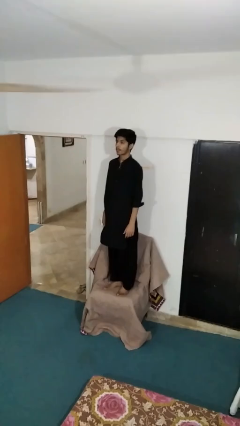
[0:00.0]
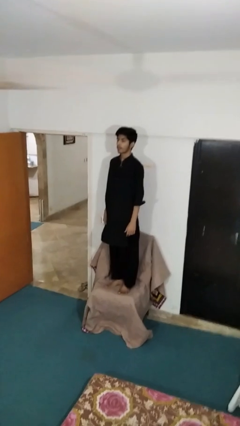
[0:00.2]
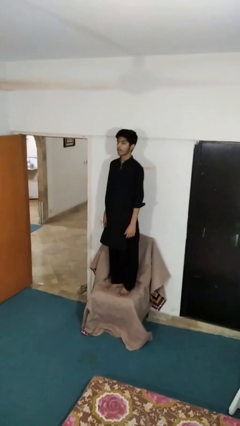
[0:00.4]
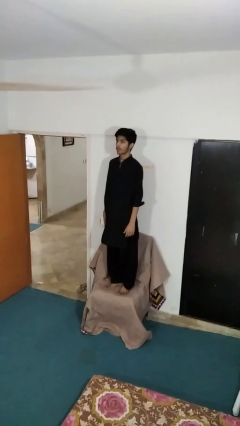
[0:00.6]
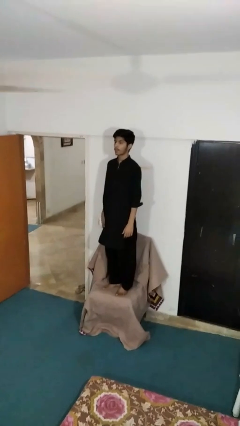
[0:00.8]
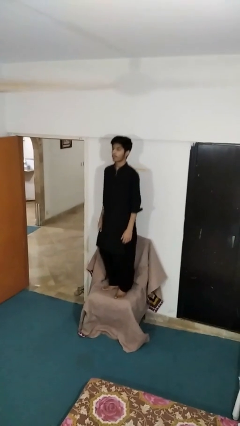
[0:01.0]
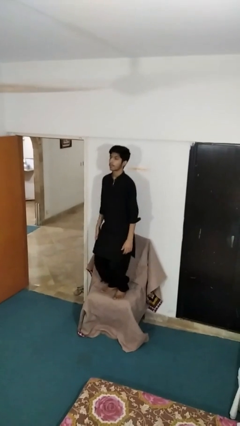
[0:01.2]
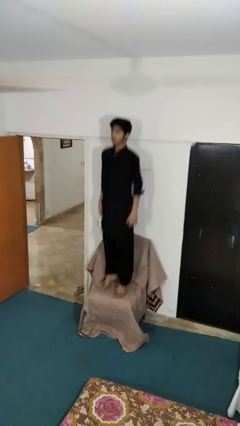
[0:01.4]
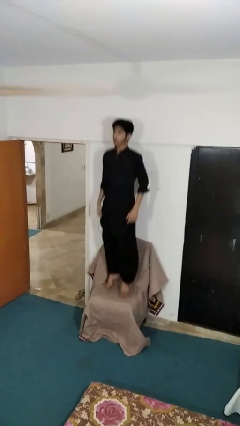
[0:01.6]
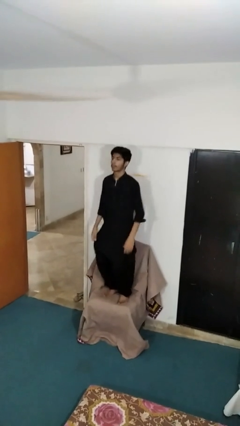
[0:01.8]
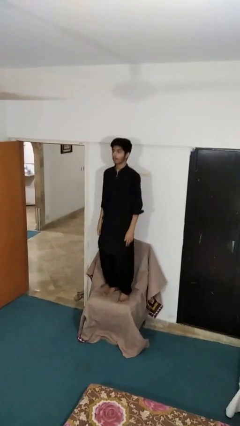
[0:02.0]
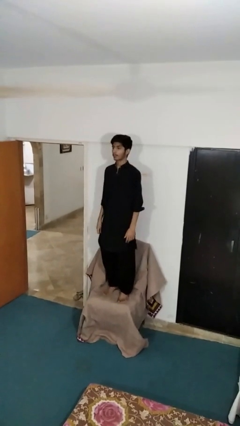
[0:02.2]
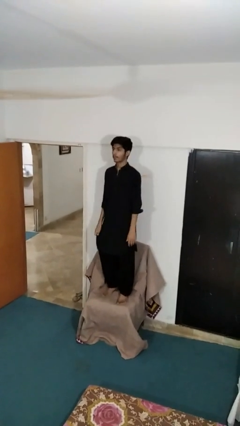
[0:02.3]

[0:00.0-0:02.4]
person jumps on couch

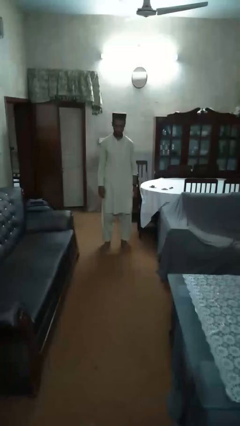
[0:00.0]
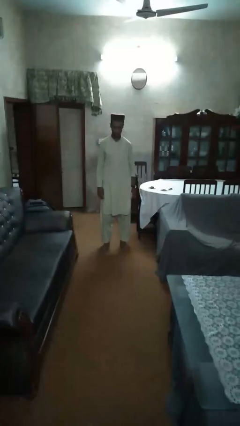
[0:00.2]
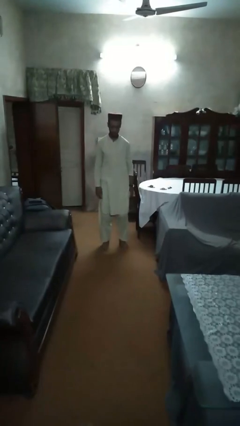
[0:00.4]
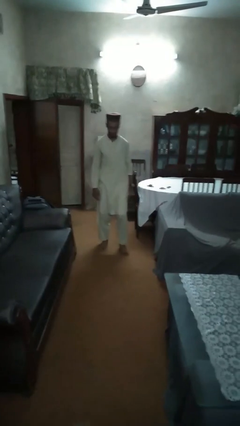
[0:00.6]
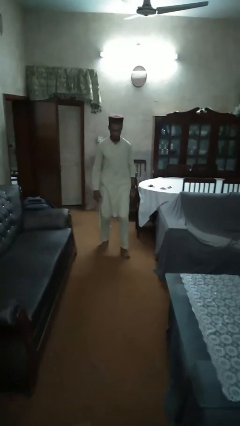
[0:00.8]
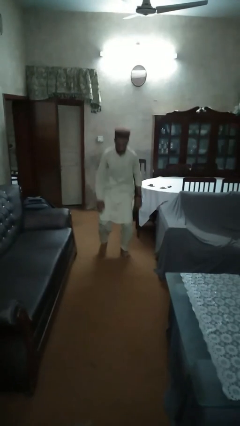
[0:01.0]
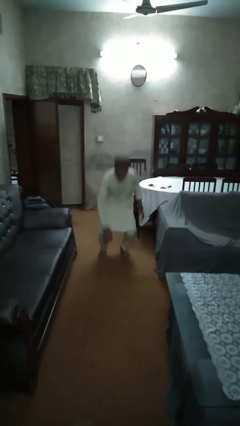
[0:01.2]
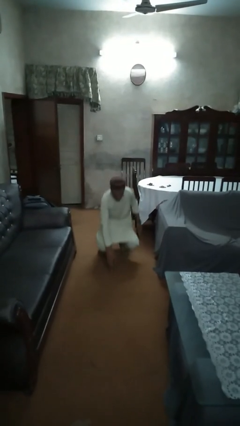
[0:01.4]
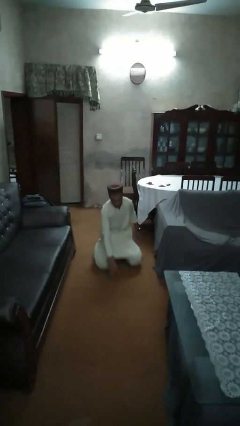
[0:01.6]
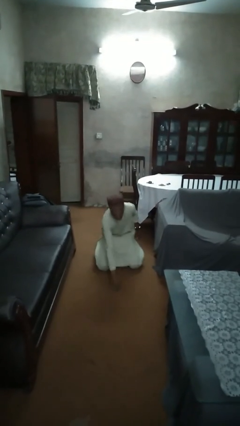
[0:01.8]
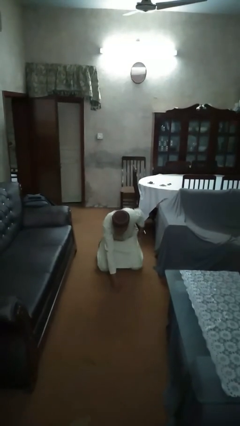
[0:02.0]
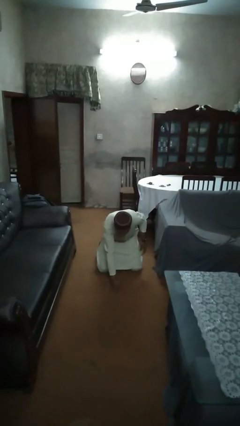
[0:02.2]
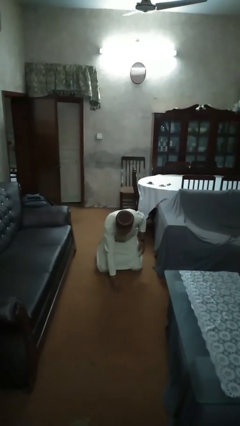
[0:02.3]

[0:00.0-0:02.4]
person trips on object on floor

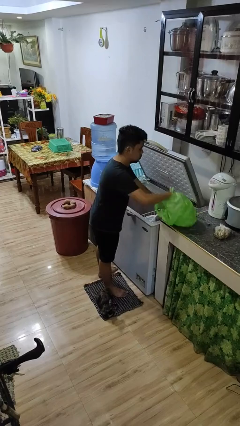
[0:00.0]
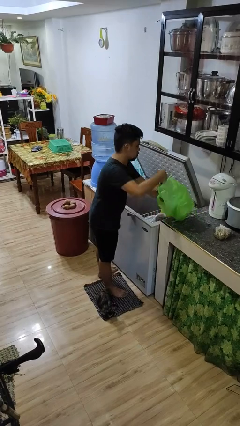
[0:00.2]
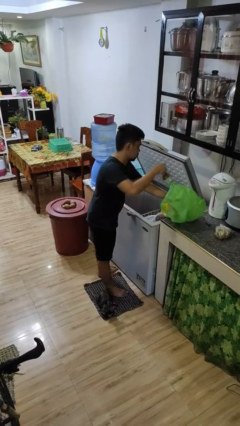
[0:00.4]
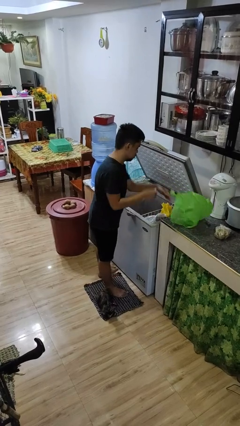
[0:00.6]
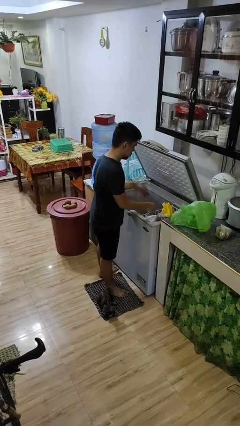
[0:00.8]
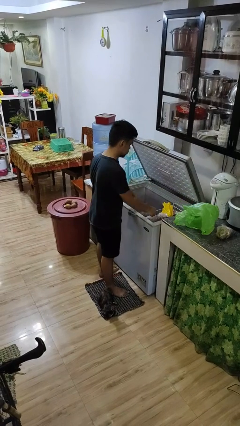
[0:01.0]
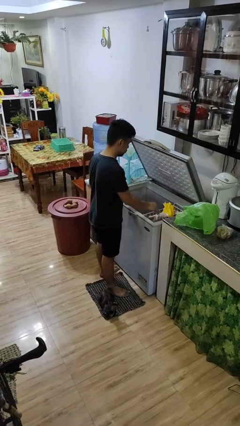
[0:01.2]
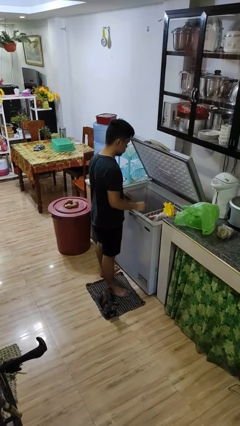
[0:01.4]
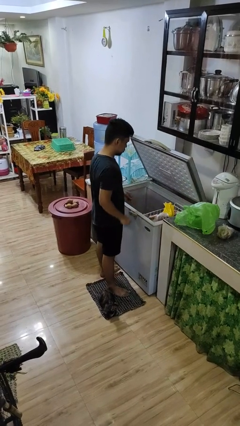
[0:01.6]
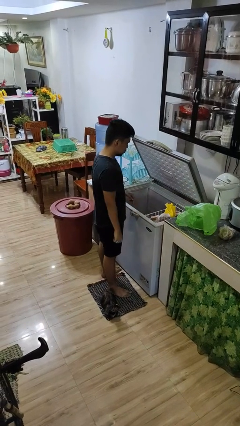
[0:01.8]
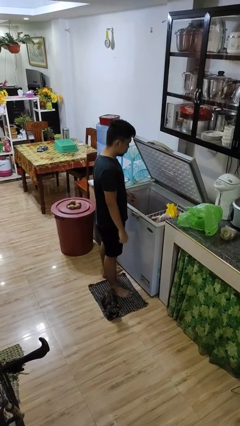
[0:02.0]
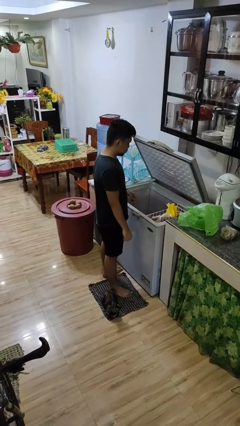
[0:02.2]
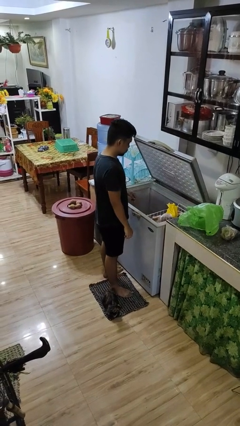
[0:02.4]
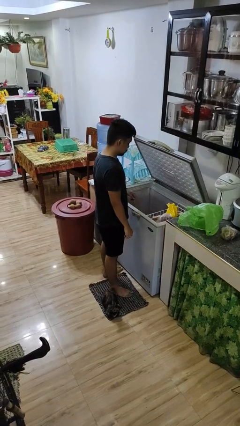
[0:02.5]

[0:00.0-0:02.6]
person loads groceries into refrigerator

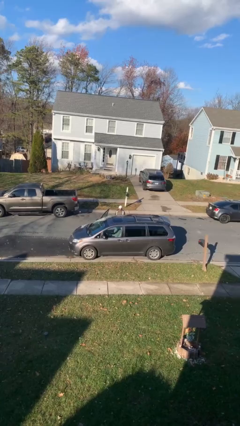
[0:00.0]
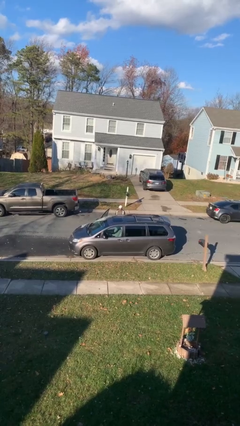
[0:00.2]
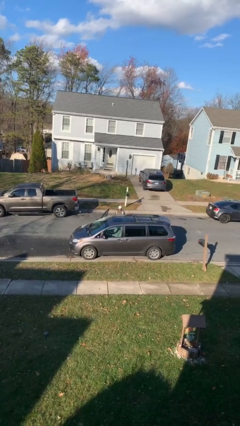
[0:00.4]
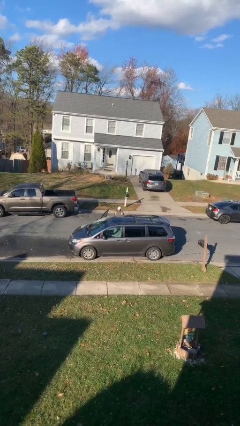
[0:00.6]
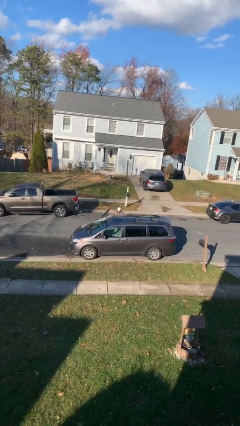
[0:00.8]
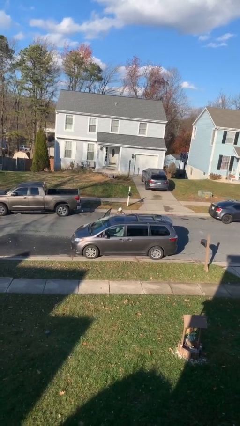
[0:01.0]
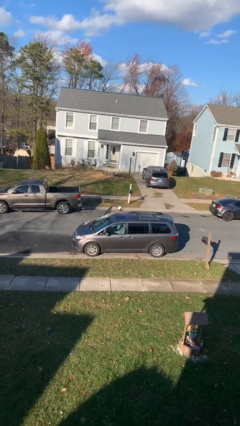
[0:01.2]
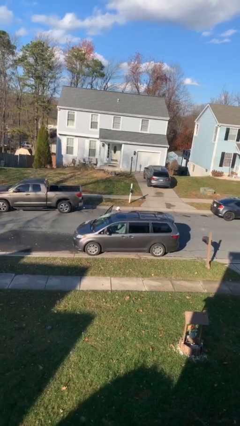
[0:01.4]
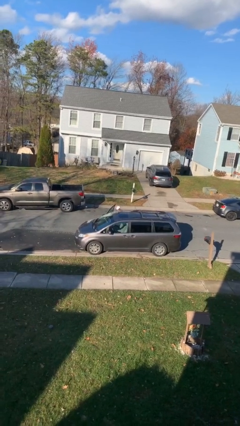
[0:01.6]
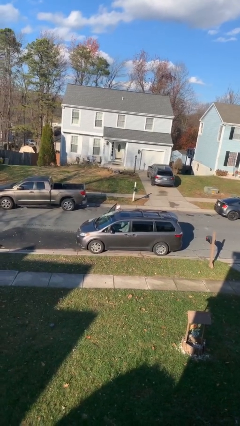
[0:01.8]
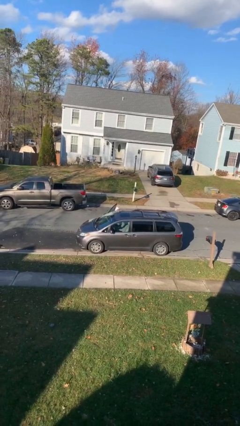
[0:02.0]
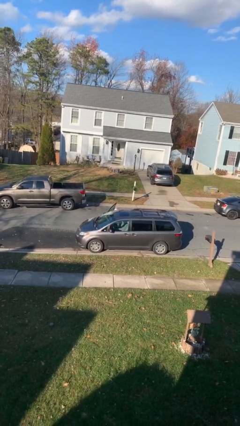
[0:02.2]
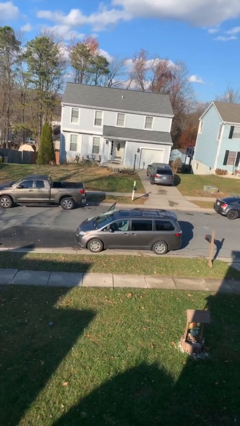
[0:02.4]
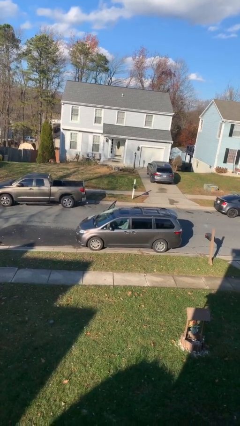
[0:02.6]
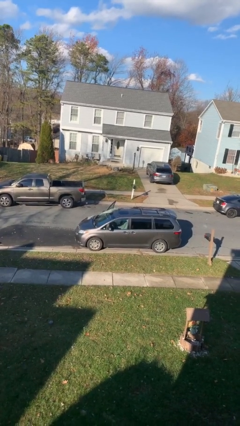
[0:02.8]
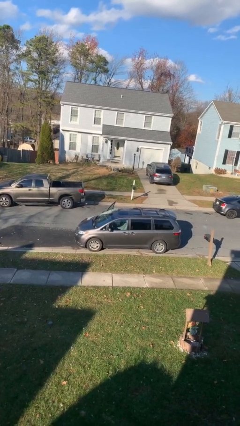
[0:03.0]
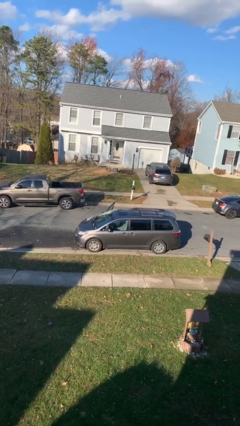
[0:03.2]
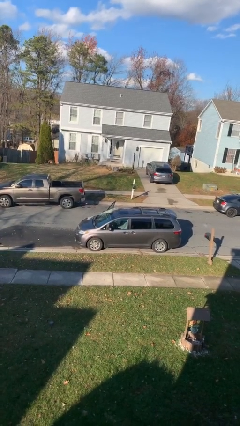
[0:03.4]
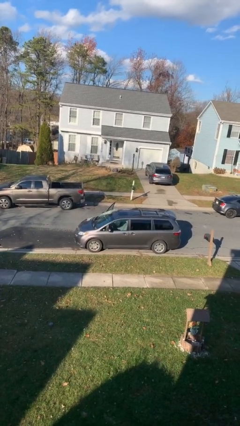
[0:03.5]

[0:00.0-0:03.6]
person enters car

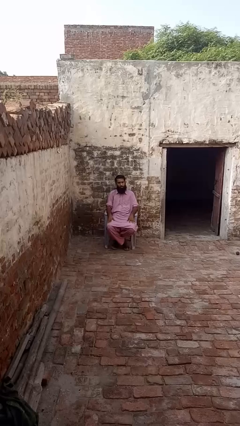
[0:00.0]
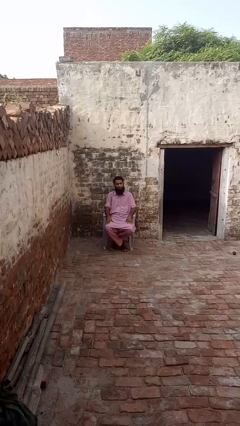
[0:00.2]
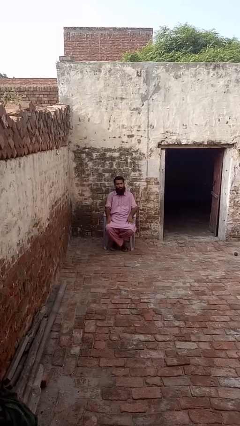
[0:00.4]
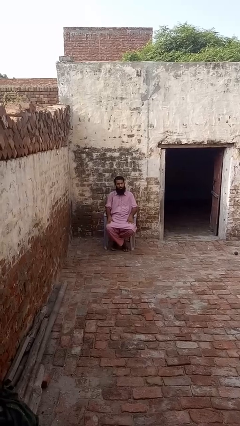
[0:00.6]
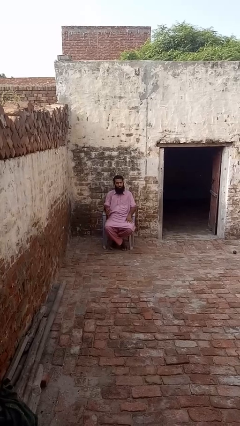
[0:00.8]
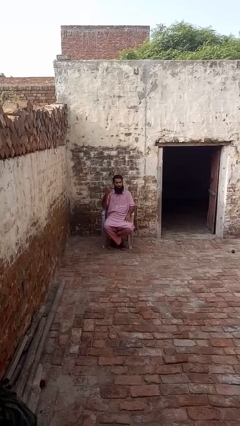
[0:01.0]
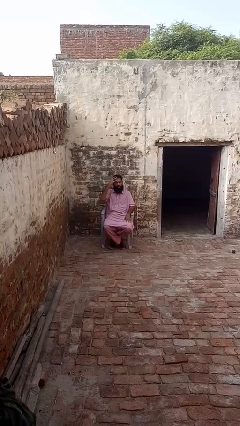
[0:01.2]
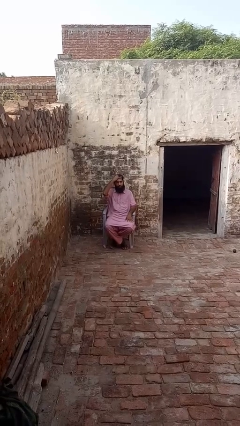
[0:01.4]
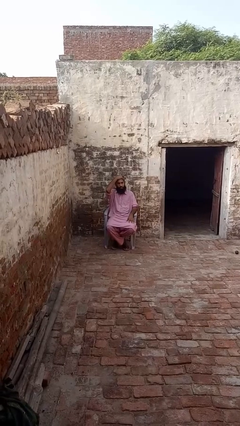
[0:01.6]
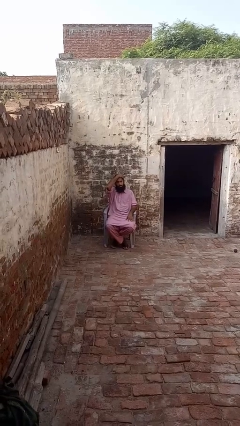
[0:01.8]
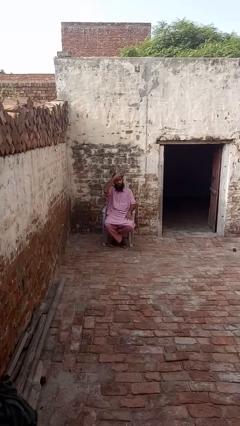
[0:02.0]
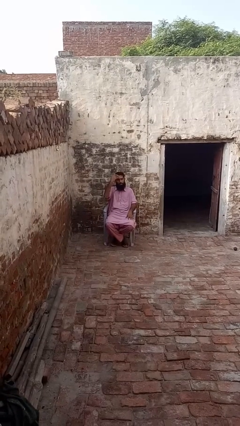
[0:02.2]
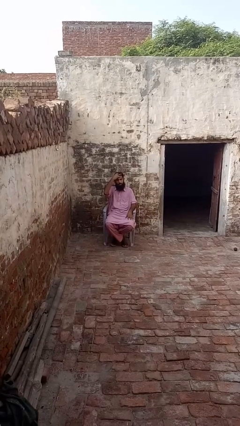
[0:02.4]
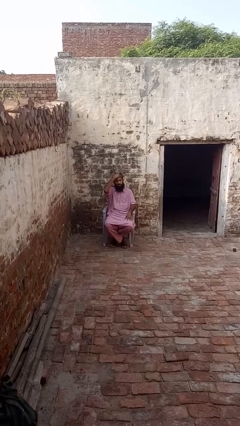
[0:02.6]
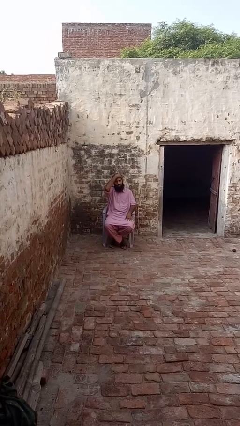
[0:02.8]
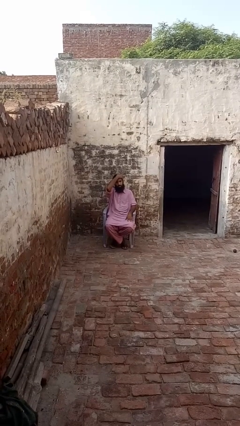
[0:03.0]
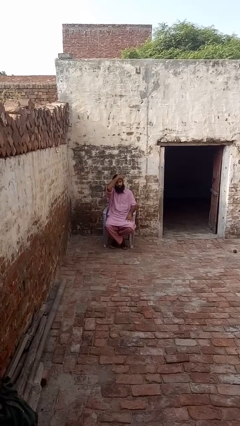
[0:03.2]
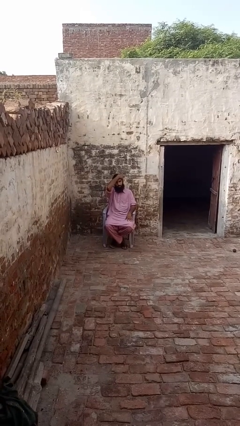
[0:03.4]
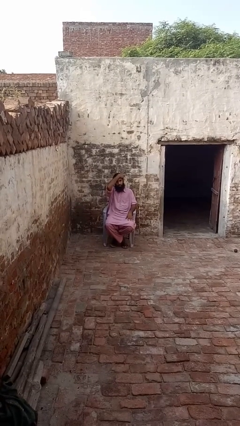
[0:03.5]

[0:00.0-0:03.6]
person strokes hair

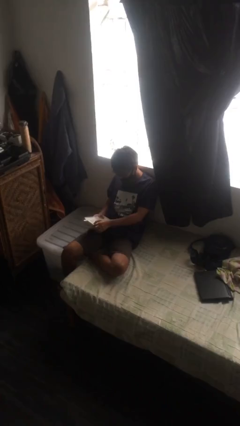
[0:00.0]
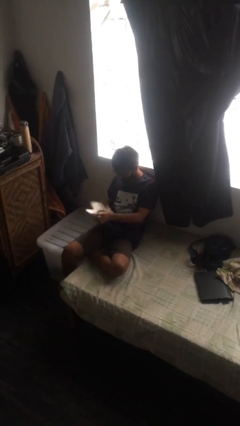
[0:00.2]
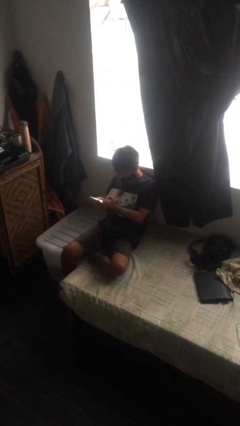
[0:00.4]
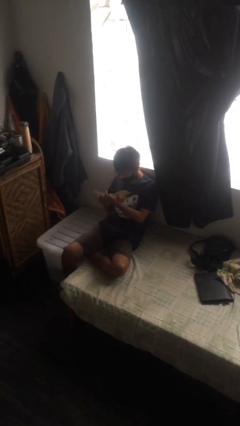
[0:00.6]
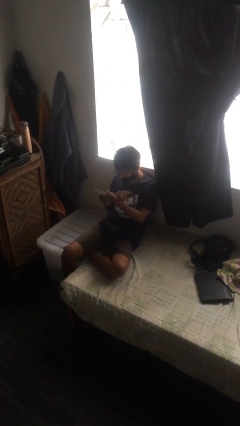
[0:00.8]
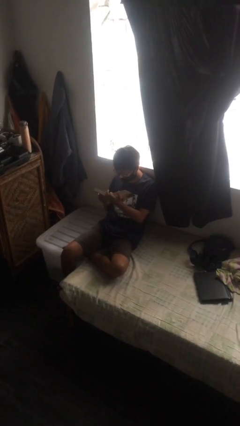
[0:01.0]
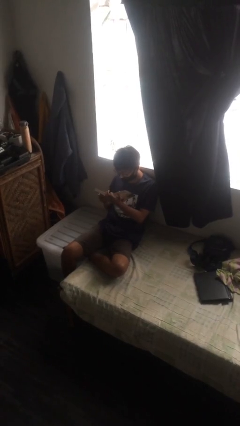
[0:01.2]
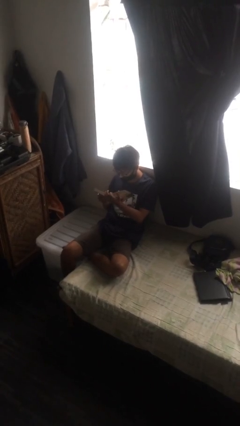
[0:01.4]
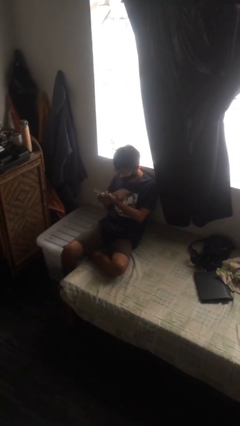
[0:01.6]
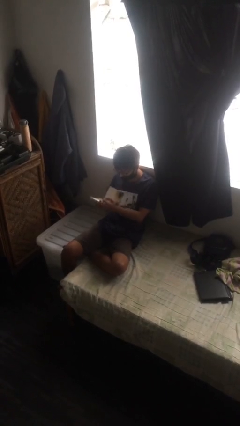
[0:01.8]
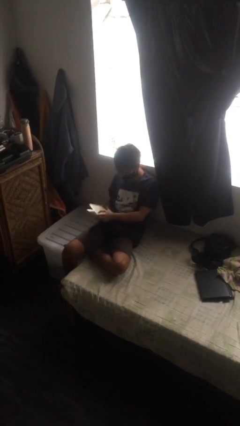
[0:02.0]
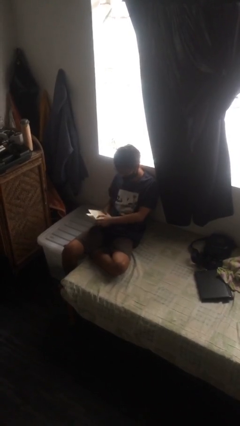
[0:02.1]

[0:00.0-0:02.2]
person reads document

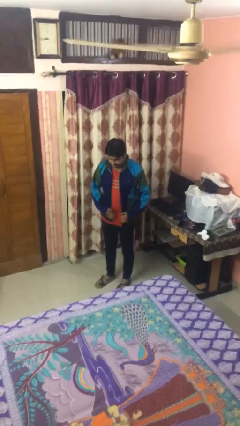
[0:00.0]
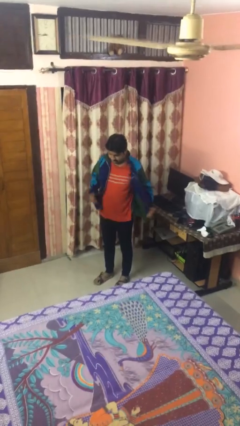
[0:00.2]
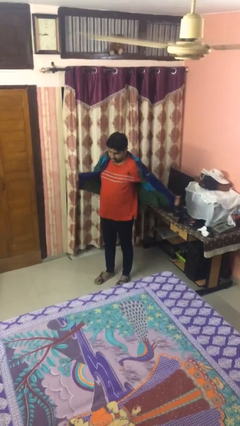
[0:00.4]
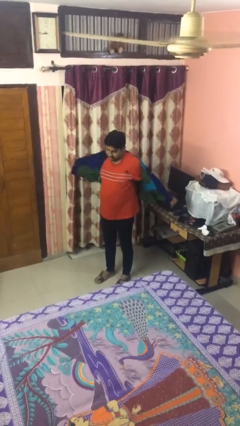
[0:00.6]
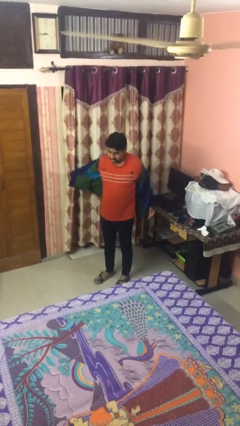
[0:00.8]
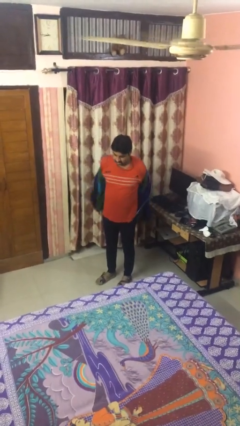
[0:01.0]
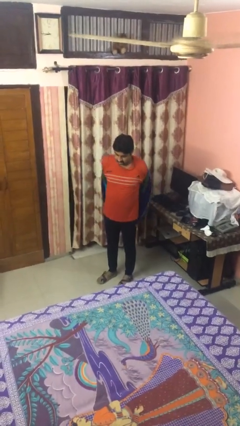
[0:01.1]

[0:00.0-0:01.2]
person takes off jacket
